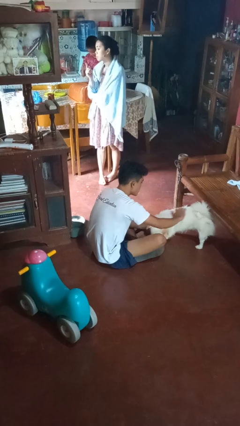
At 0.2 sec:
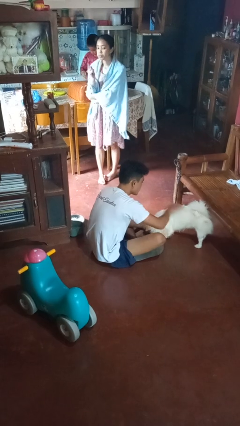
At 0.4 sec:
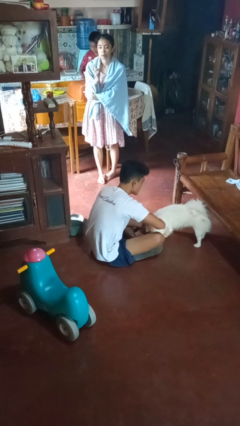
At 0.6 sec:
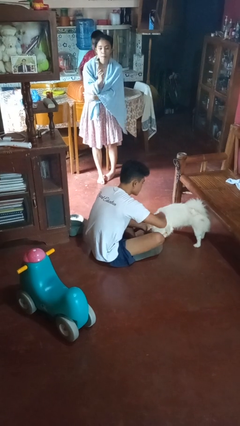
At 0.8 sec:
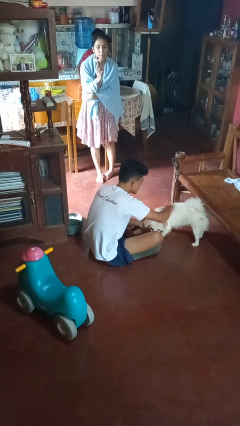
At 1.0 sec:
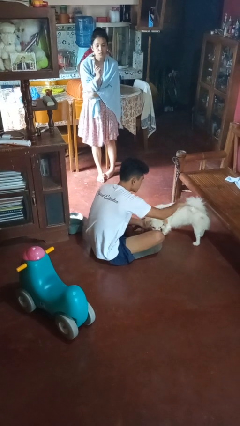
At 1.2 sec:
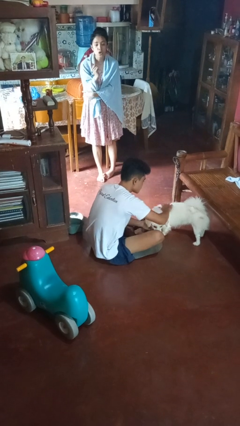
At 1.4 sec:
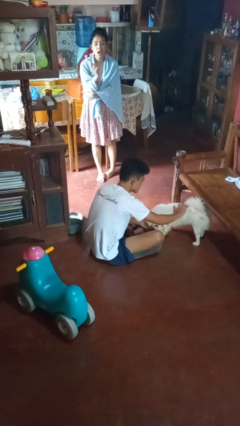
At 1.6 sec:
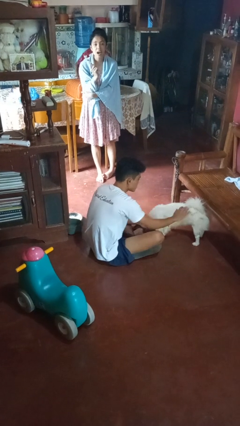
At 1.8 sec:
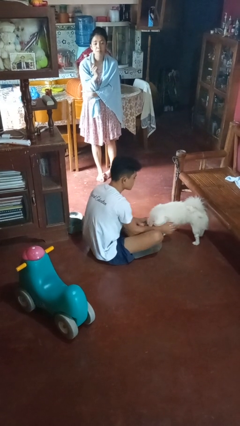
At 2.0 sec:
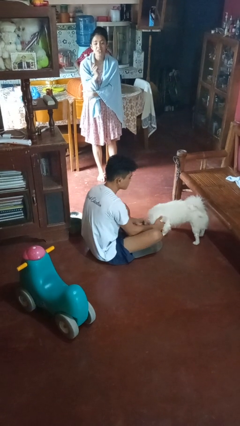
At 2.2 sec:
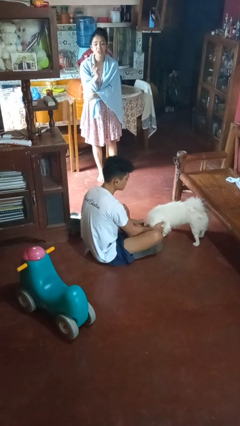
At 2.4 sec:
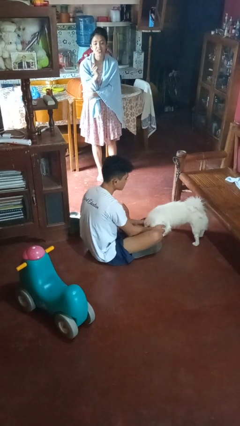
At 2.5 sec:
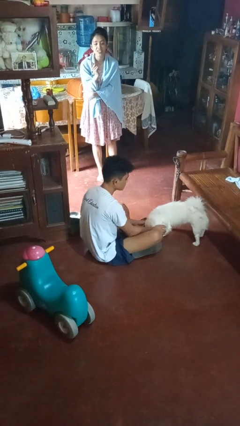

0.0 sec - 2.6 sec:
person pets dog

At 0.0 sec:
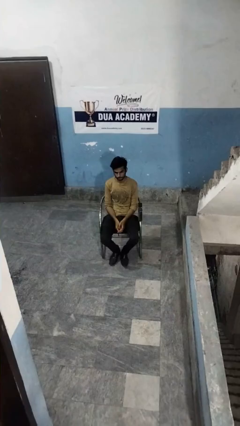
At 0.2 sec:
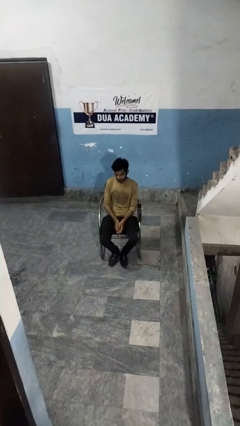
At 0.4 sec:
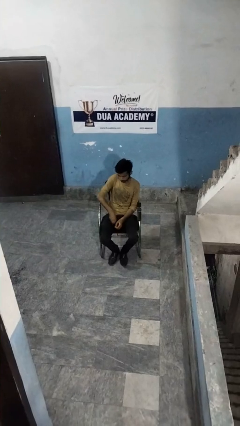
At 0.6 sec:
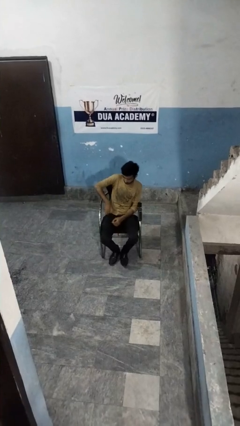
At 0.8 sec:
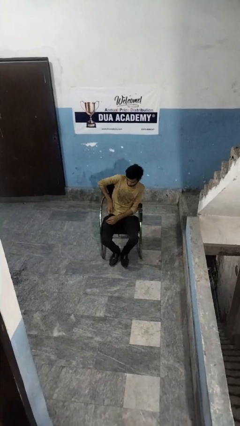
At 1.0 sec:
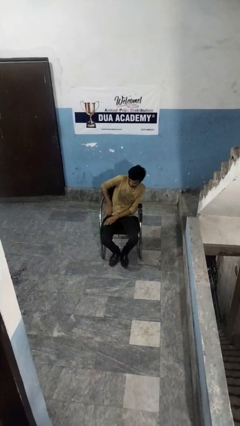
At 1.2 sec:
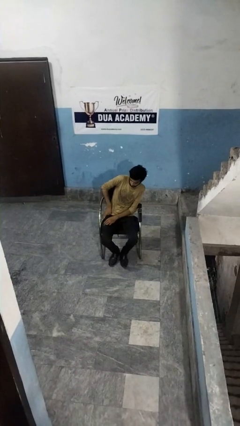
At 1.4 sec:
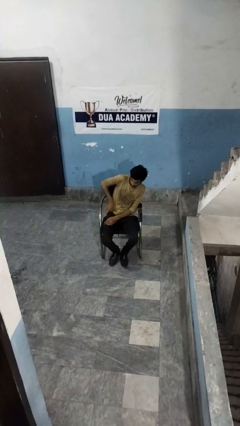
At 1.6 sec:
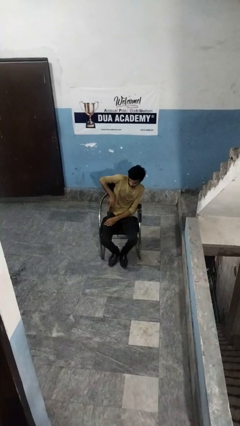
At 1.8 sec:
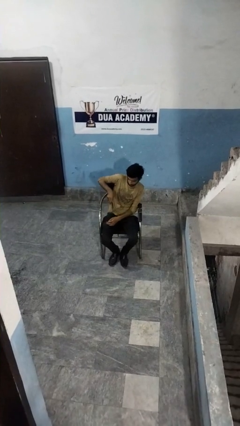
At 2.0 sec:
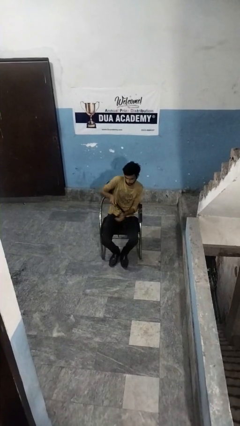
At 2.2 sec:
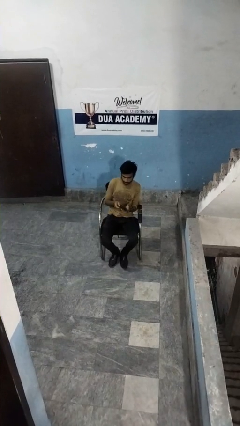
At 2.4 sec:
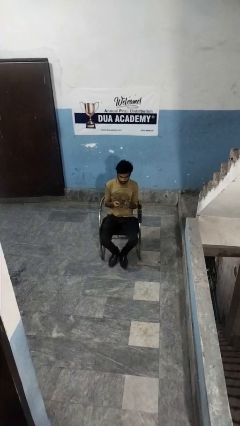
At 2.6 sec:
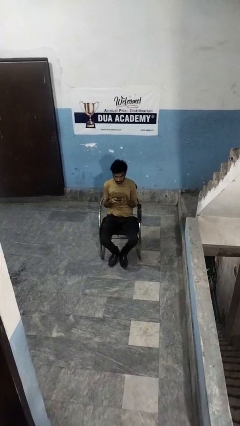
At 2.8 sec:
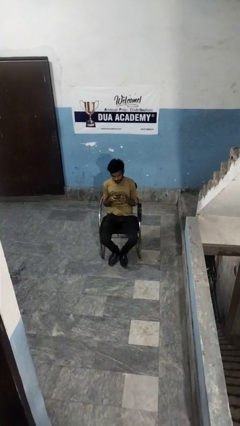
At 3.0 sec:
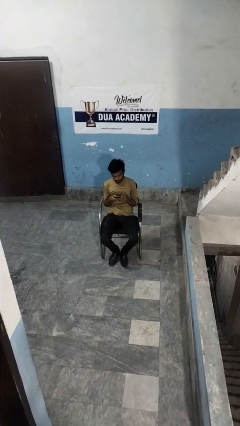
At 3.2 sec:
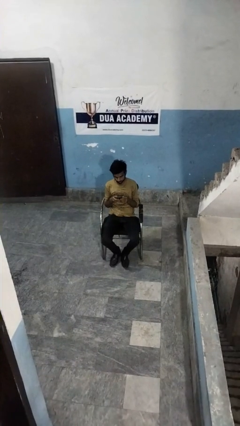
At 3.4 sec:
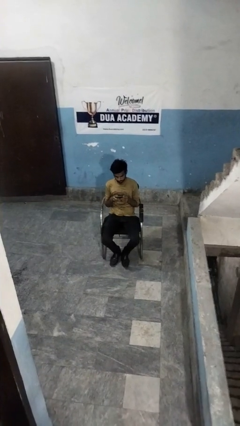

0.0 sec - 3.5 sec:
person takes phone from pocket

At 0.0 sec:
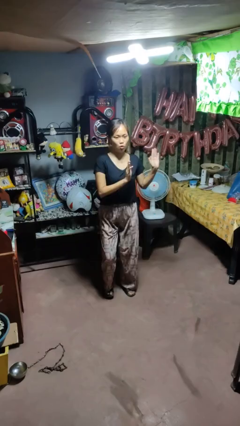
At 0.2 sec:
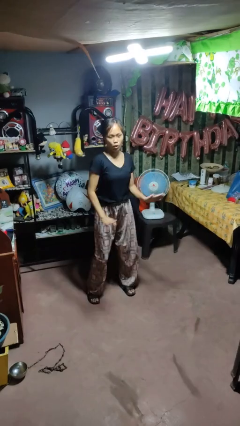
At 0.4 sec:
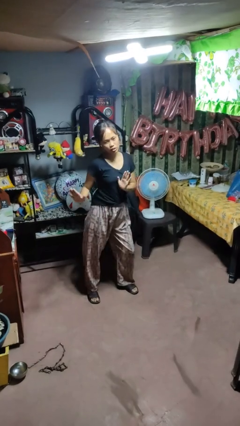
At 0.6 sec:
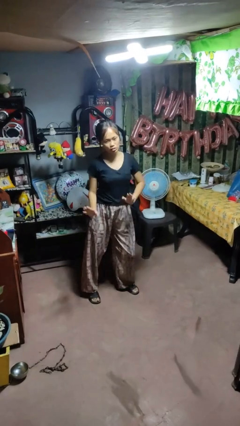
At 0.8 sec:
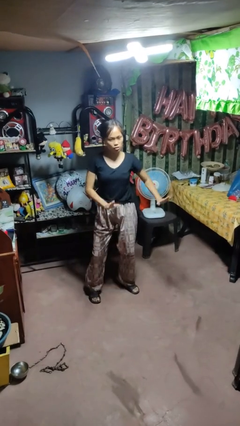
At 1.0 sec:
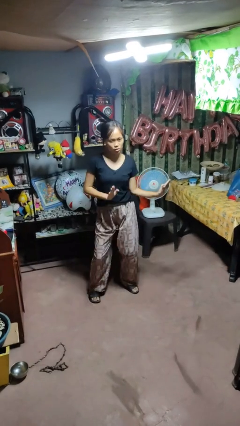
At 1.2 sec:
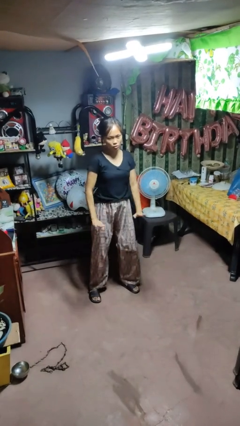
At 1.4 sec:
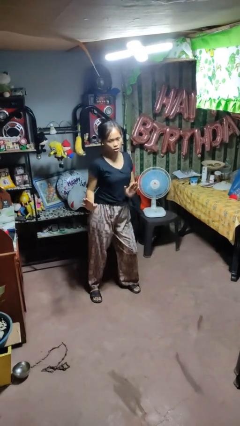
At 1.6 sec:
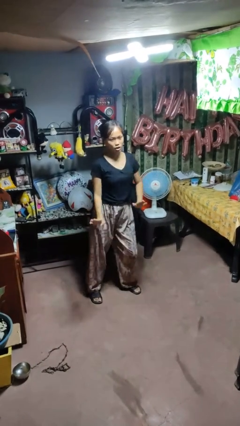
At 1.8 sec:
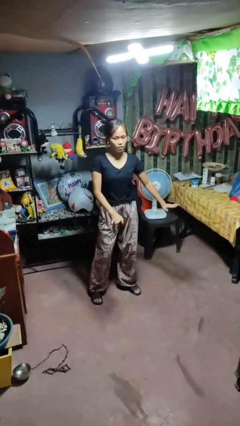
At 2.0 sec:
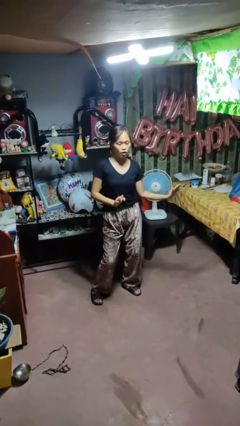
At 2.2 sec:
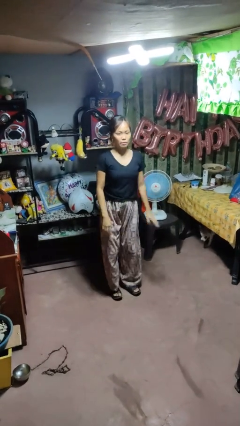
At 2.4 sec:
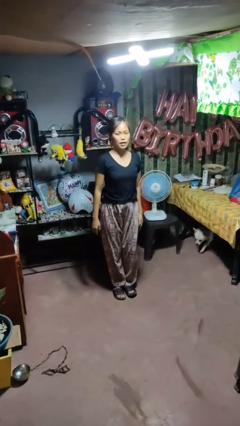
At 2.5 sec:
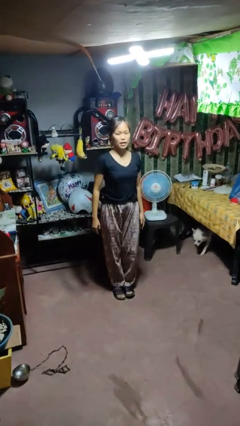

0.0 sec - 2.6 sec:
person dances in place

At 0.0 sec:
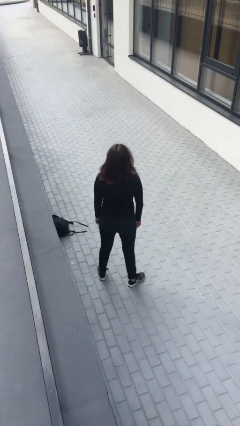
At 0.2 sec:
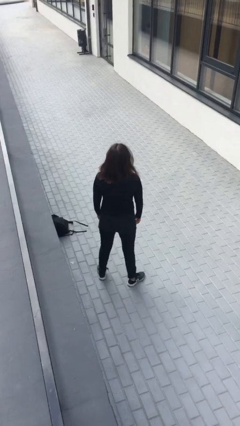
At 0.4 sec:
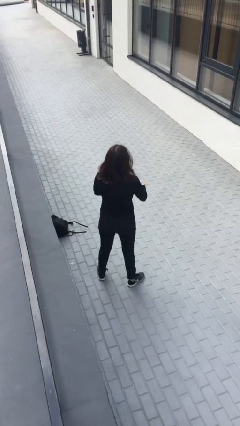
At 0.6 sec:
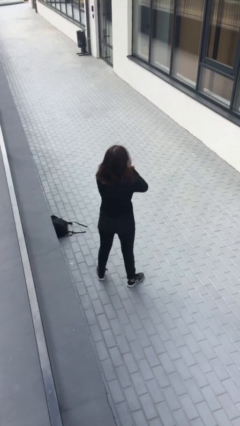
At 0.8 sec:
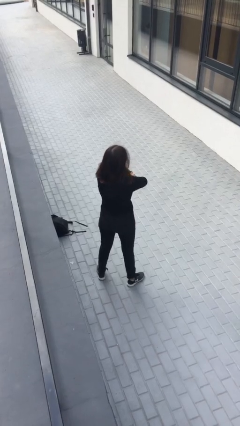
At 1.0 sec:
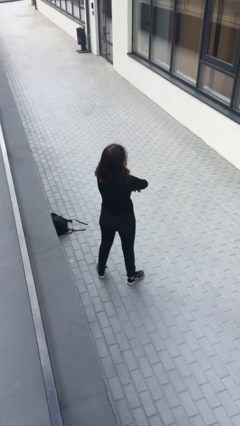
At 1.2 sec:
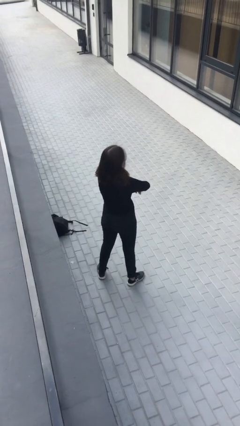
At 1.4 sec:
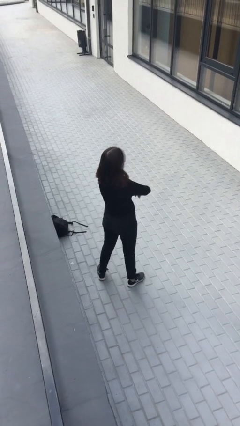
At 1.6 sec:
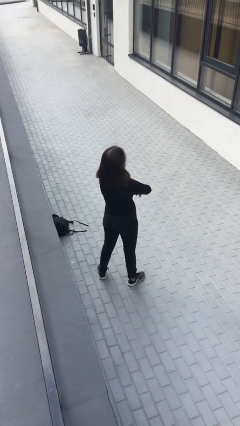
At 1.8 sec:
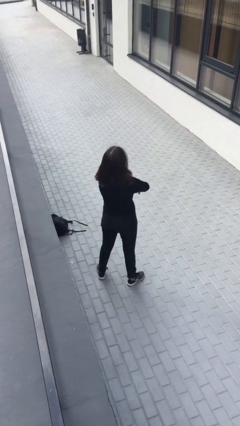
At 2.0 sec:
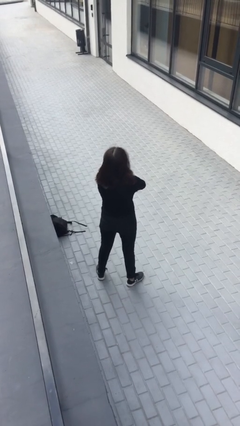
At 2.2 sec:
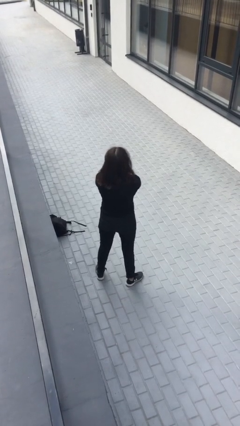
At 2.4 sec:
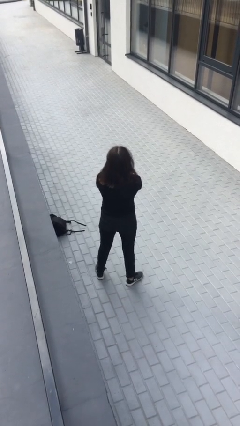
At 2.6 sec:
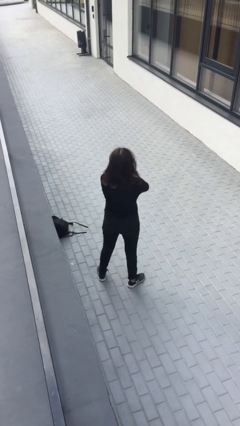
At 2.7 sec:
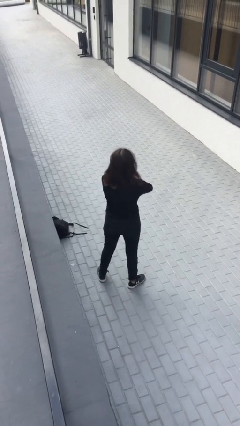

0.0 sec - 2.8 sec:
person crosses arms

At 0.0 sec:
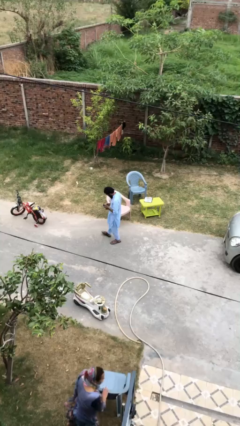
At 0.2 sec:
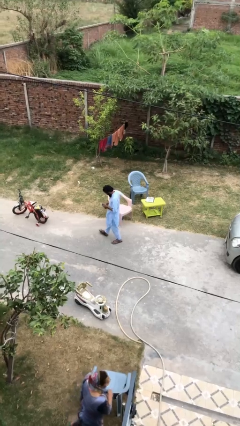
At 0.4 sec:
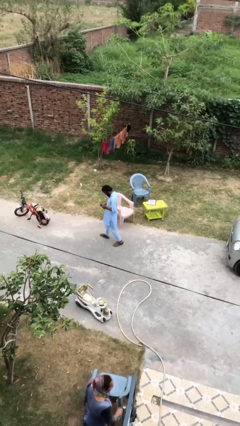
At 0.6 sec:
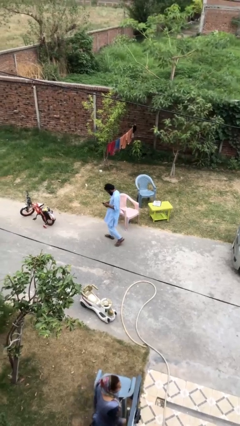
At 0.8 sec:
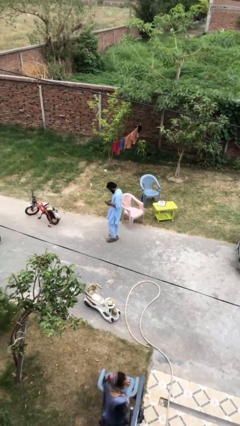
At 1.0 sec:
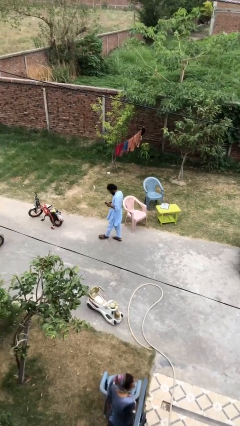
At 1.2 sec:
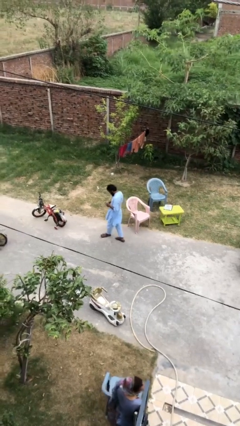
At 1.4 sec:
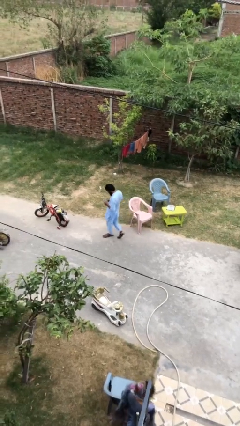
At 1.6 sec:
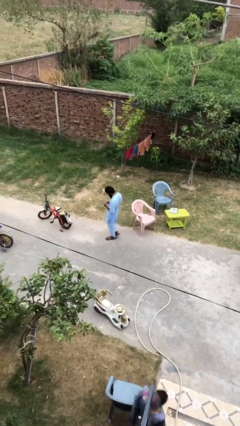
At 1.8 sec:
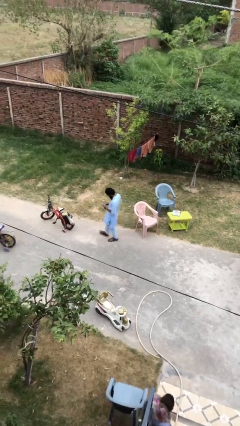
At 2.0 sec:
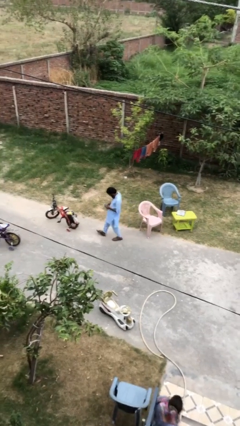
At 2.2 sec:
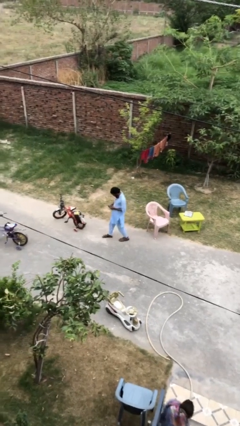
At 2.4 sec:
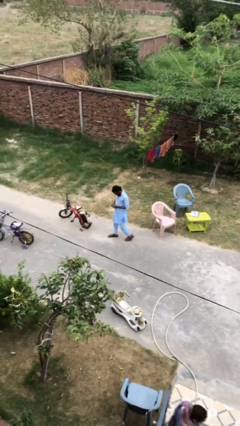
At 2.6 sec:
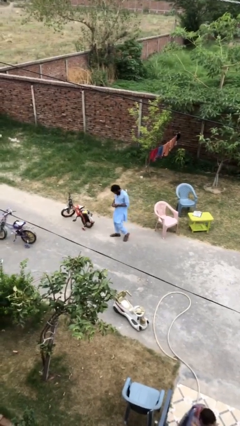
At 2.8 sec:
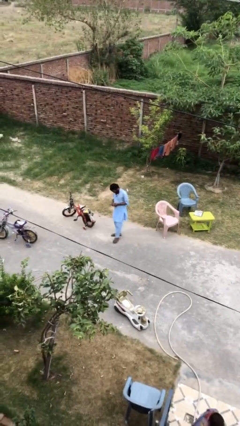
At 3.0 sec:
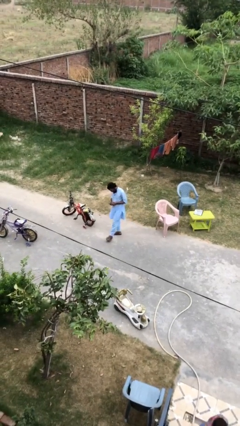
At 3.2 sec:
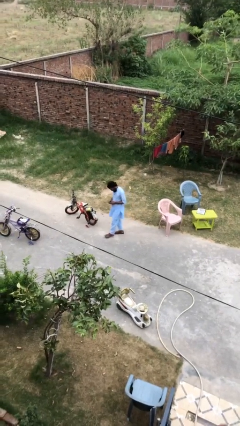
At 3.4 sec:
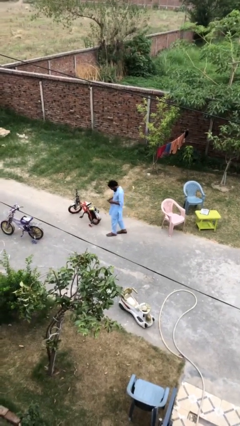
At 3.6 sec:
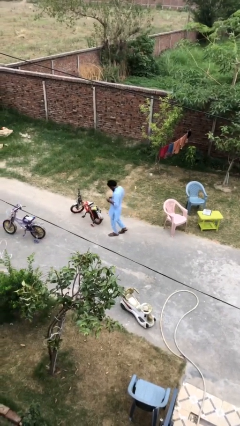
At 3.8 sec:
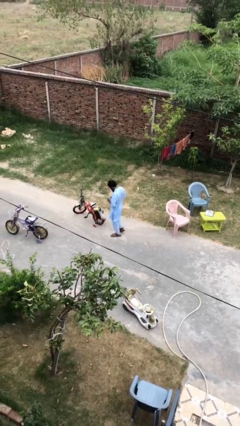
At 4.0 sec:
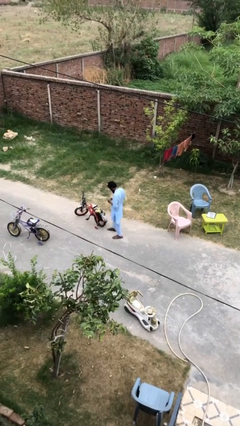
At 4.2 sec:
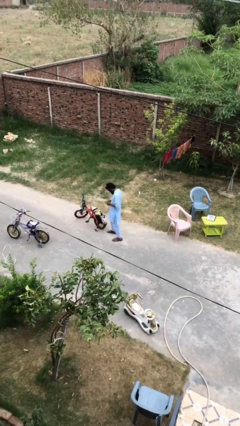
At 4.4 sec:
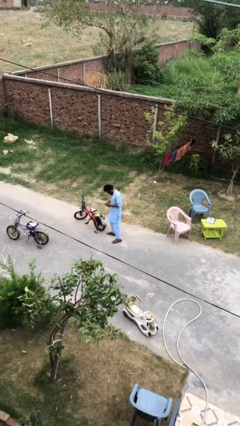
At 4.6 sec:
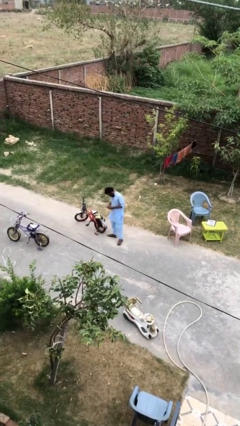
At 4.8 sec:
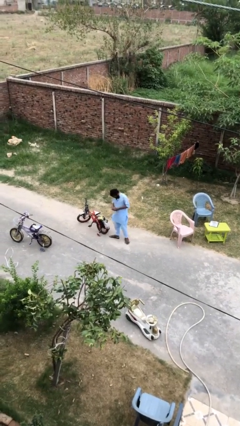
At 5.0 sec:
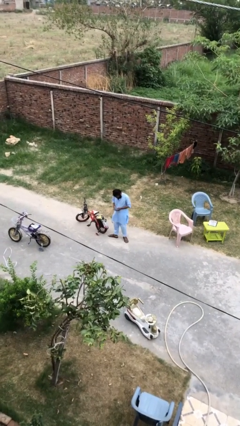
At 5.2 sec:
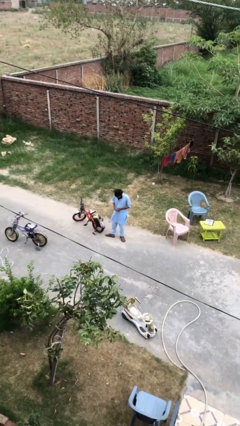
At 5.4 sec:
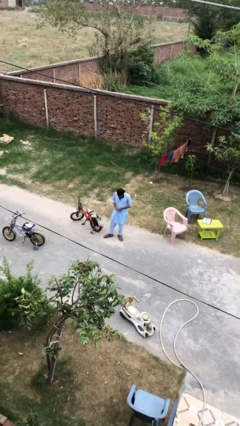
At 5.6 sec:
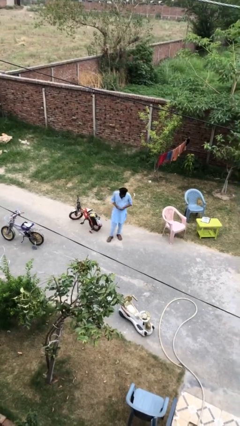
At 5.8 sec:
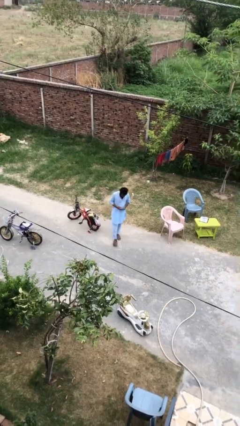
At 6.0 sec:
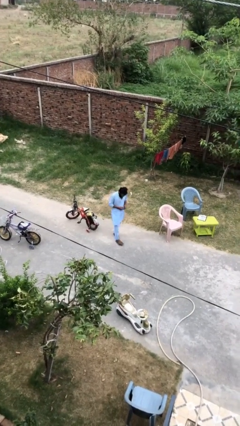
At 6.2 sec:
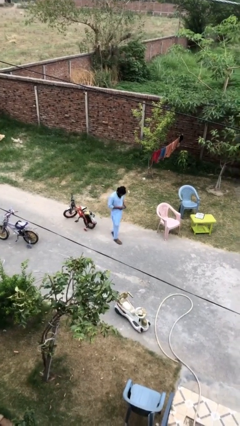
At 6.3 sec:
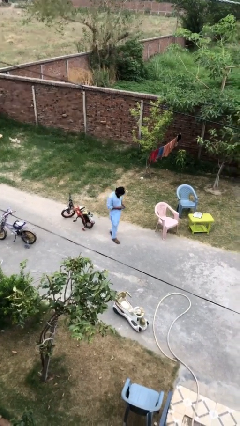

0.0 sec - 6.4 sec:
person texts on phone
